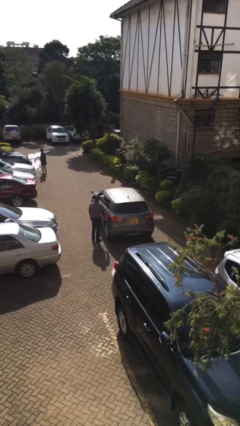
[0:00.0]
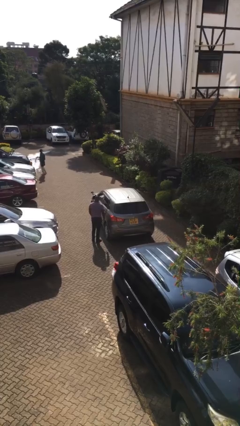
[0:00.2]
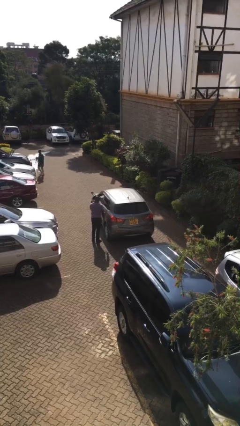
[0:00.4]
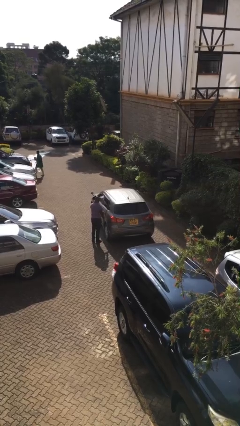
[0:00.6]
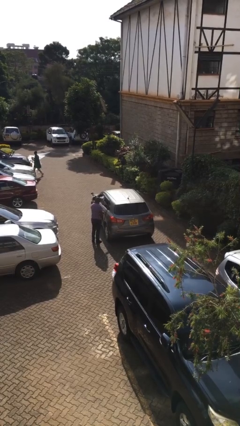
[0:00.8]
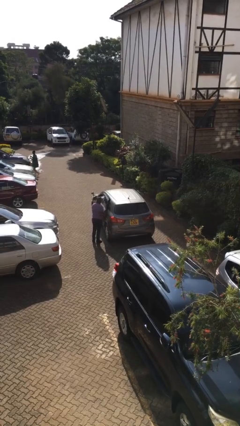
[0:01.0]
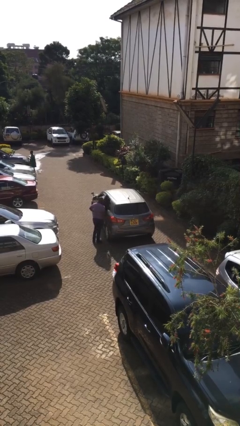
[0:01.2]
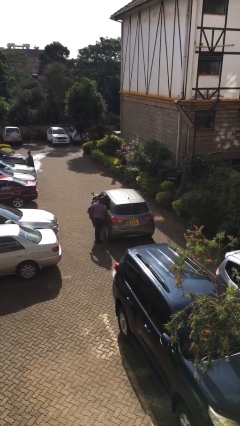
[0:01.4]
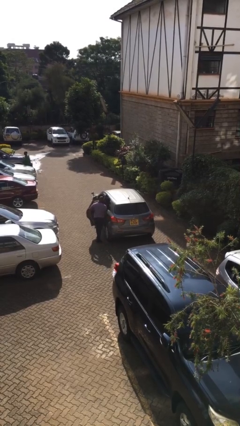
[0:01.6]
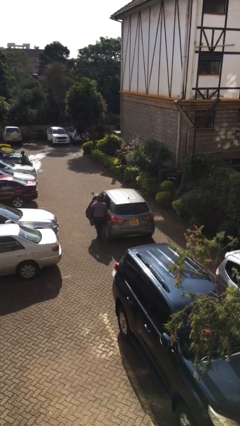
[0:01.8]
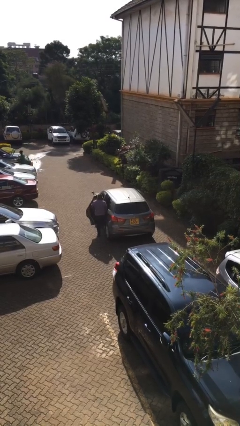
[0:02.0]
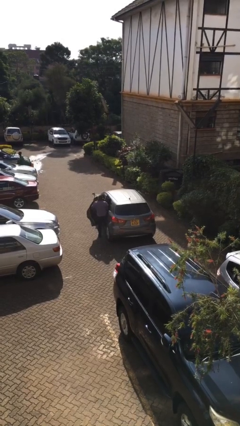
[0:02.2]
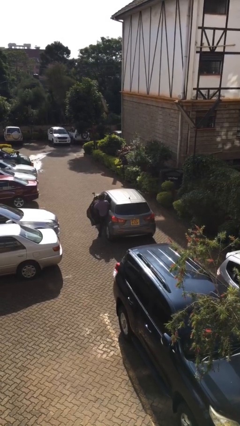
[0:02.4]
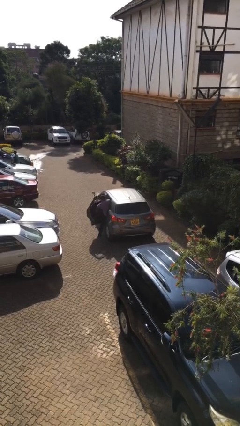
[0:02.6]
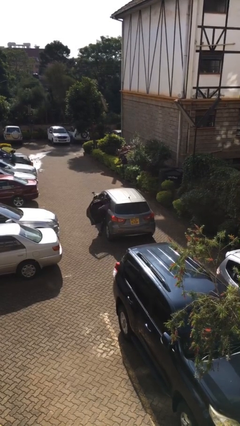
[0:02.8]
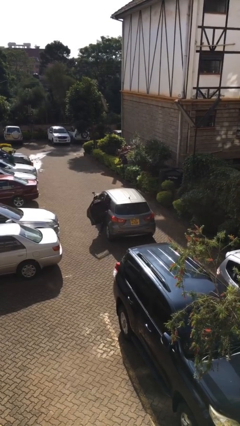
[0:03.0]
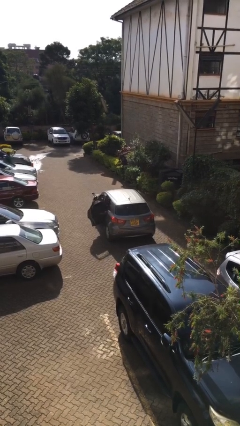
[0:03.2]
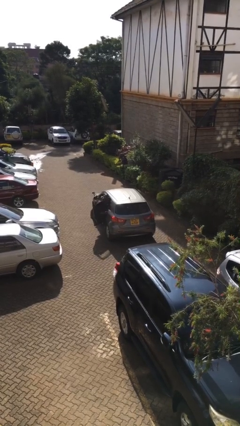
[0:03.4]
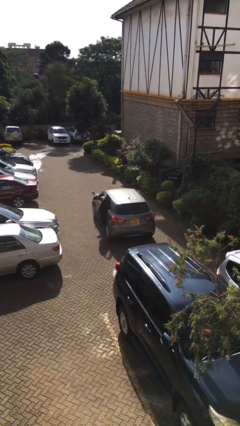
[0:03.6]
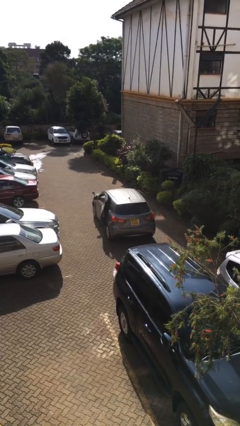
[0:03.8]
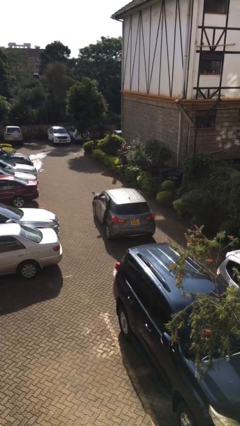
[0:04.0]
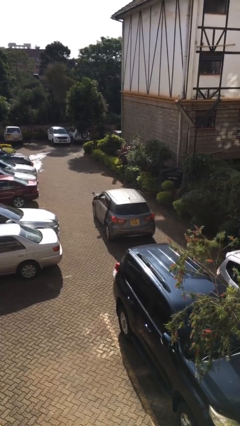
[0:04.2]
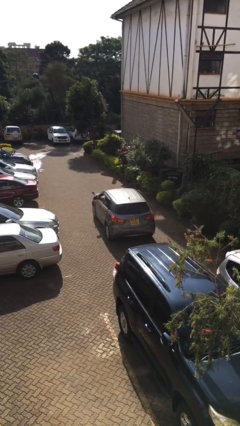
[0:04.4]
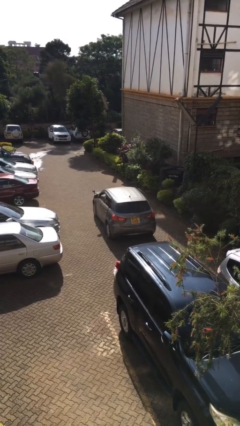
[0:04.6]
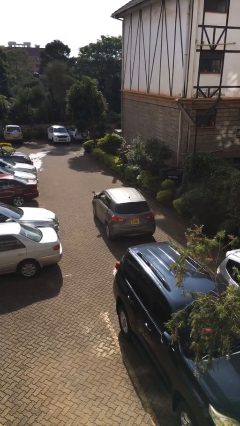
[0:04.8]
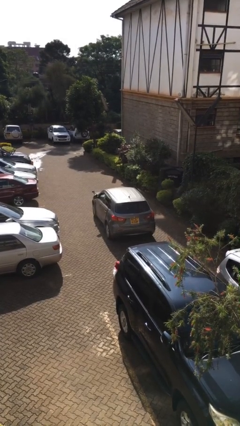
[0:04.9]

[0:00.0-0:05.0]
car picks up person

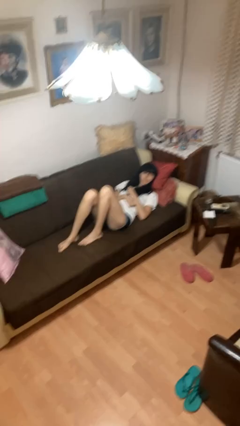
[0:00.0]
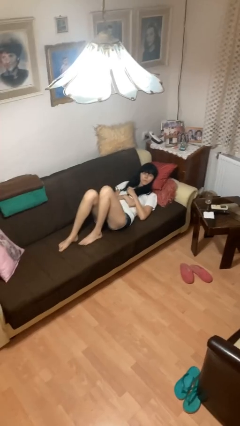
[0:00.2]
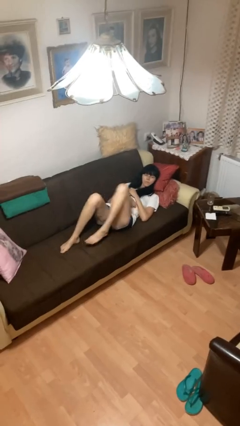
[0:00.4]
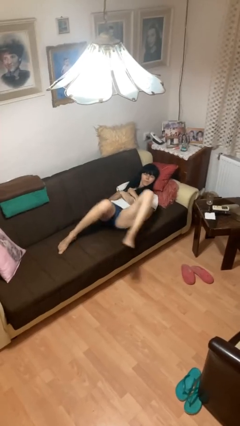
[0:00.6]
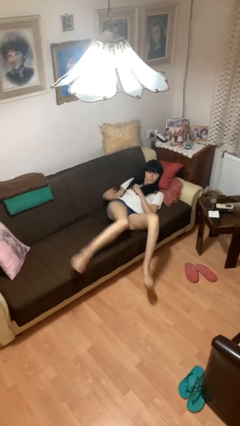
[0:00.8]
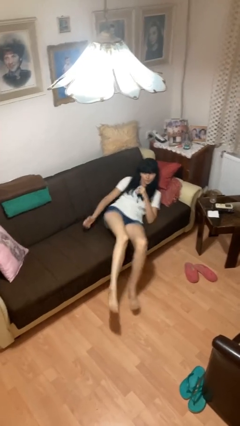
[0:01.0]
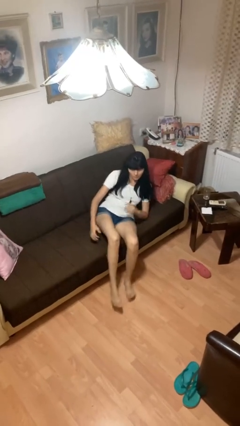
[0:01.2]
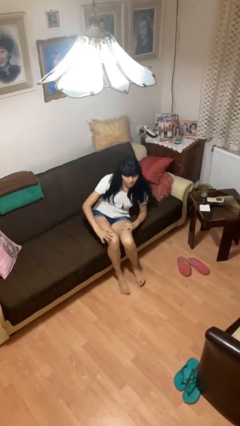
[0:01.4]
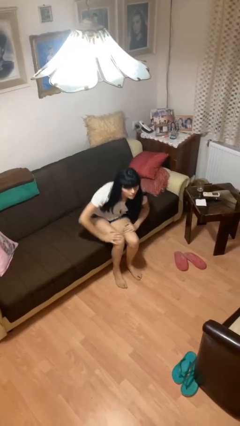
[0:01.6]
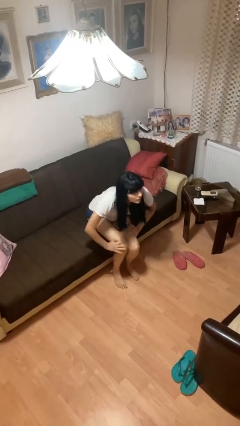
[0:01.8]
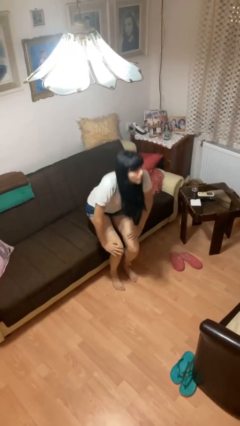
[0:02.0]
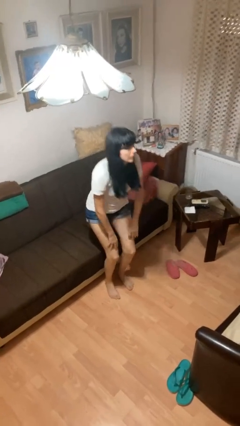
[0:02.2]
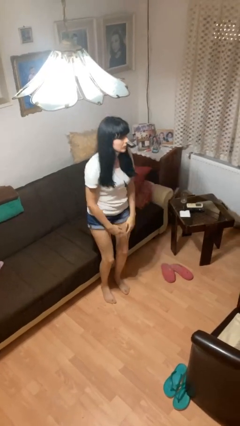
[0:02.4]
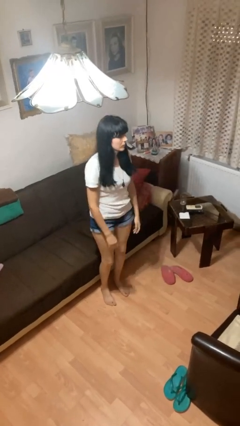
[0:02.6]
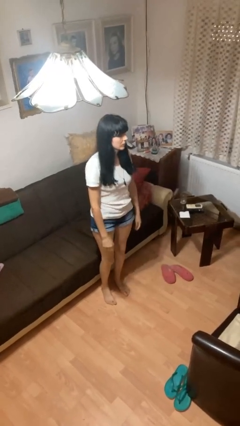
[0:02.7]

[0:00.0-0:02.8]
person stands up

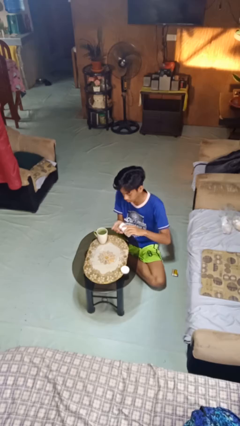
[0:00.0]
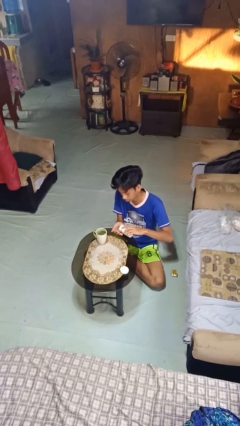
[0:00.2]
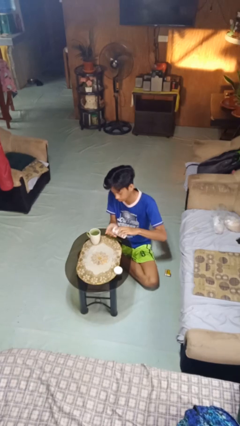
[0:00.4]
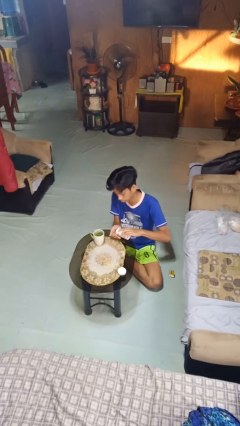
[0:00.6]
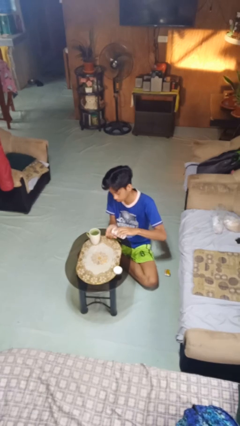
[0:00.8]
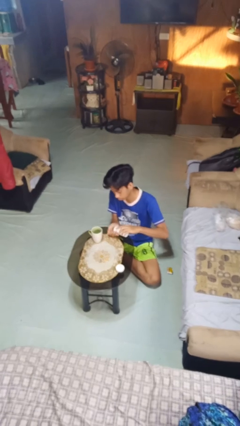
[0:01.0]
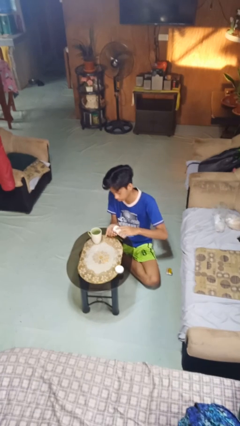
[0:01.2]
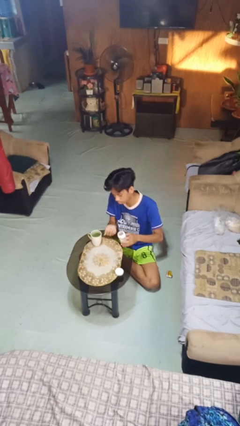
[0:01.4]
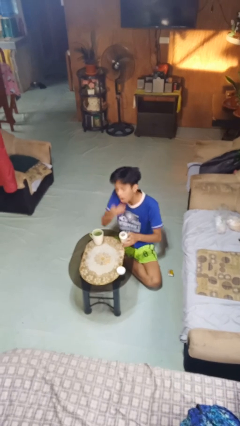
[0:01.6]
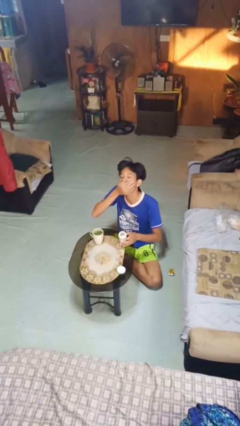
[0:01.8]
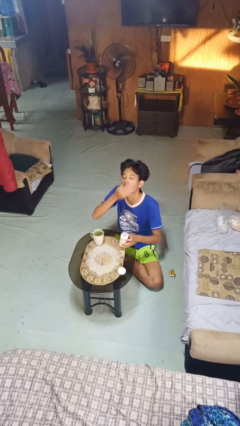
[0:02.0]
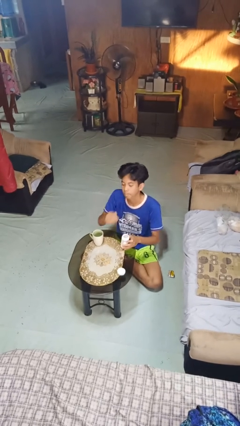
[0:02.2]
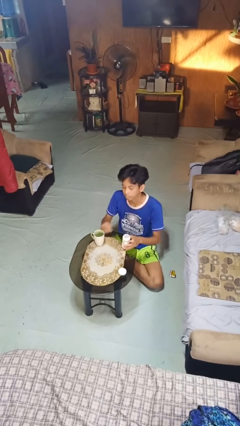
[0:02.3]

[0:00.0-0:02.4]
person takes medicine pills

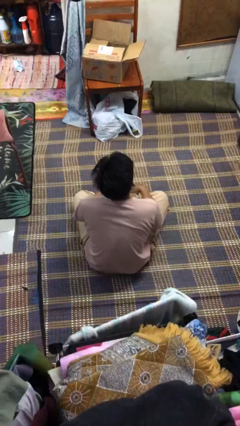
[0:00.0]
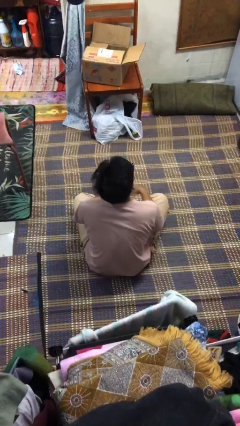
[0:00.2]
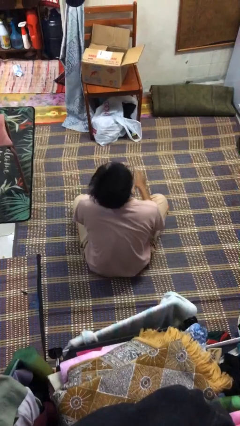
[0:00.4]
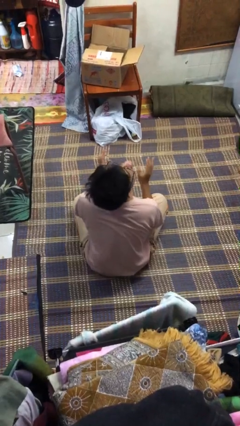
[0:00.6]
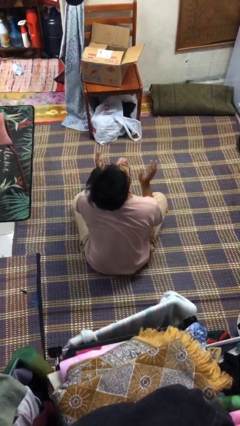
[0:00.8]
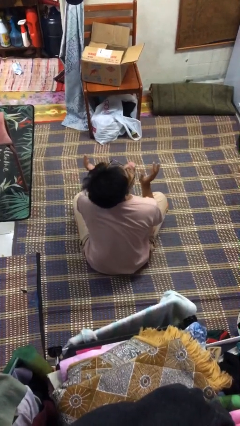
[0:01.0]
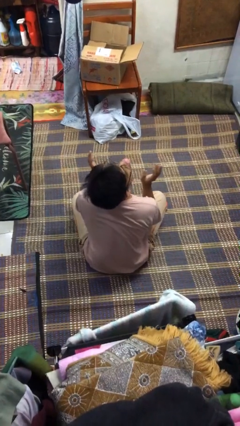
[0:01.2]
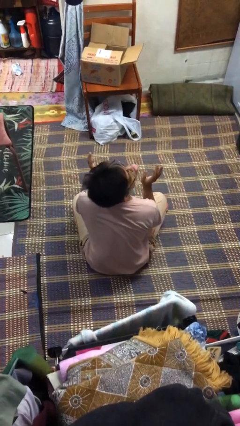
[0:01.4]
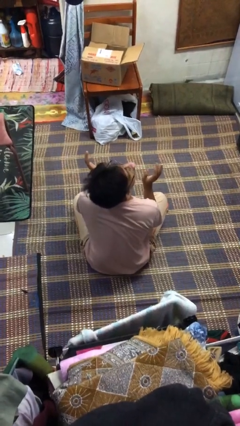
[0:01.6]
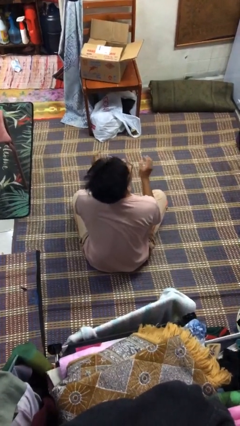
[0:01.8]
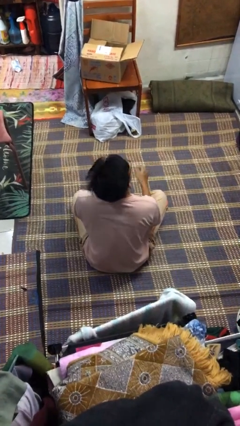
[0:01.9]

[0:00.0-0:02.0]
person sticks out tongue

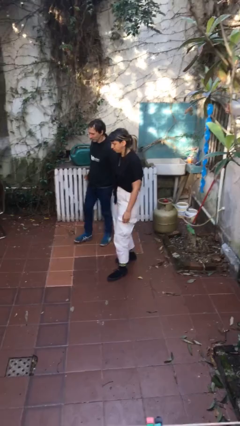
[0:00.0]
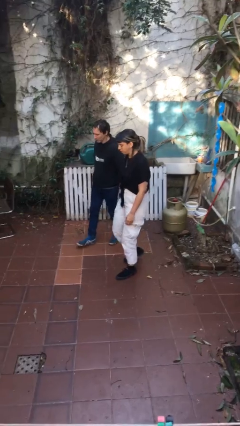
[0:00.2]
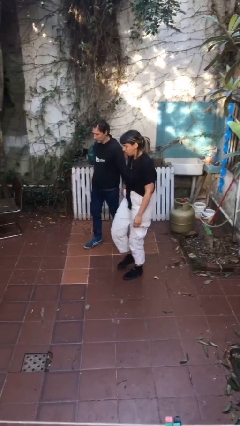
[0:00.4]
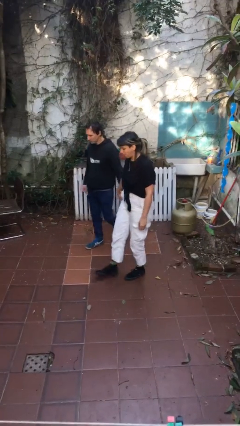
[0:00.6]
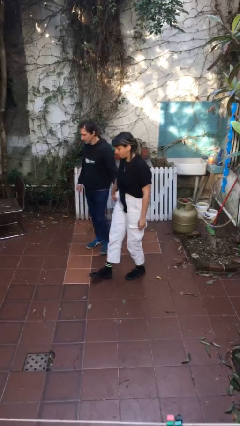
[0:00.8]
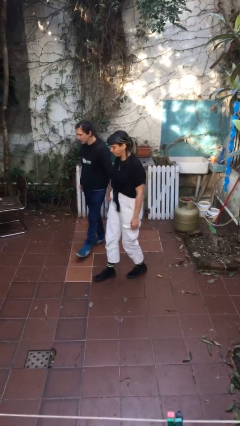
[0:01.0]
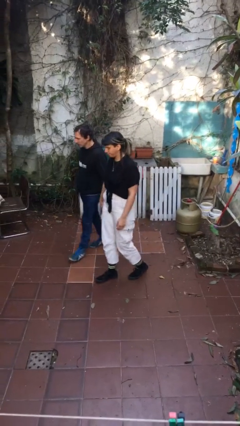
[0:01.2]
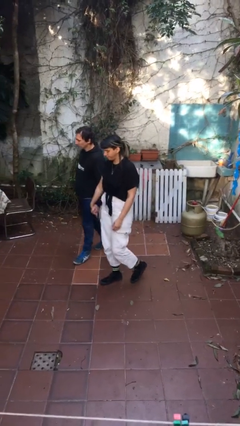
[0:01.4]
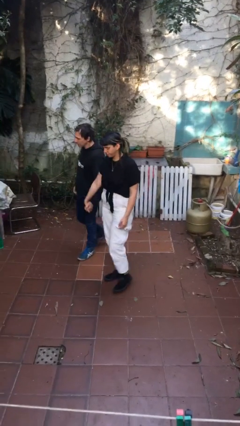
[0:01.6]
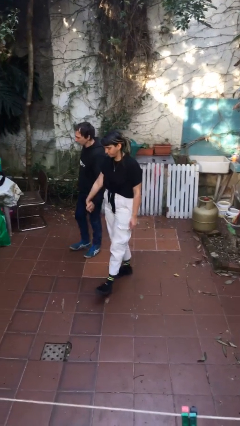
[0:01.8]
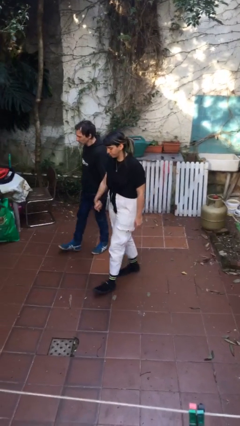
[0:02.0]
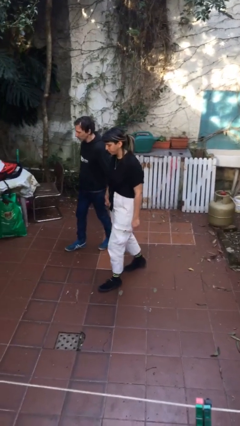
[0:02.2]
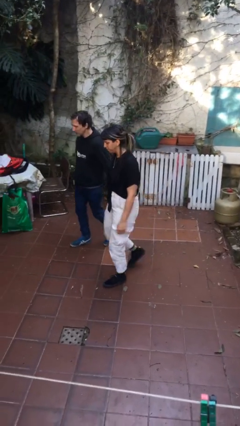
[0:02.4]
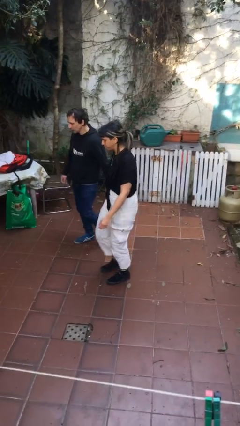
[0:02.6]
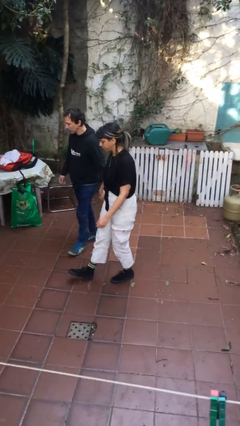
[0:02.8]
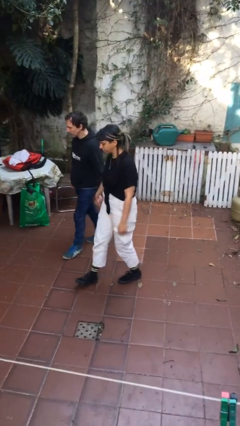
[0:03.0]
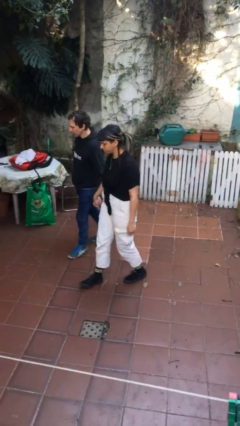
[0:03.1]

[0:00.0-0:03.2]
person holds hand

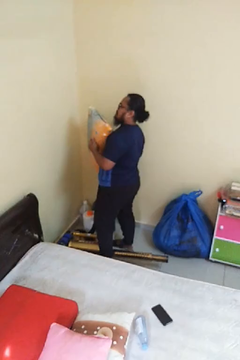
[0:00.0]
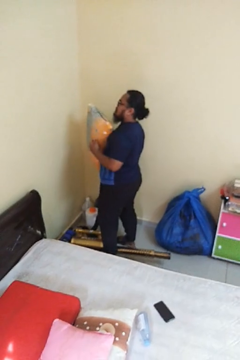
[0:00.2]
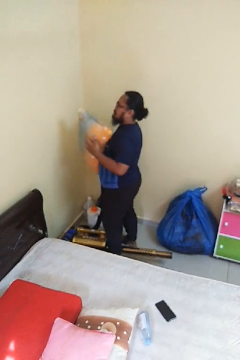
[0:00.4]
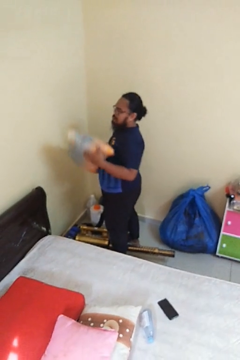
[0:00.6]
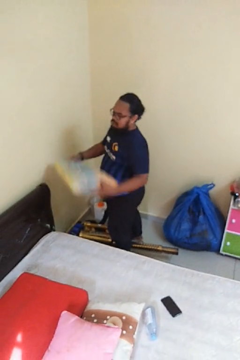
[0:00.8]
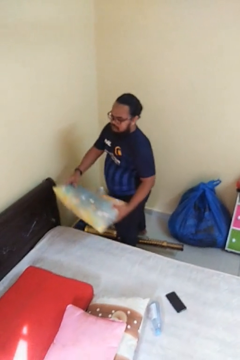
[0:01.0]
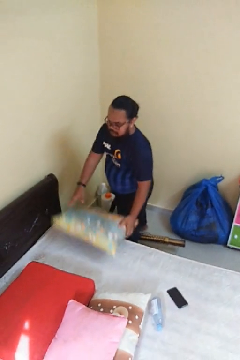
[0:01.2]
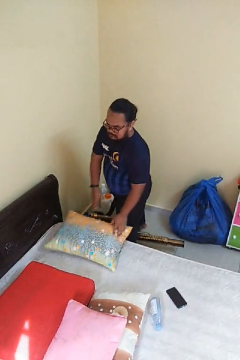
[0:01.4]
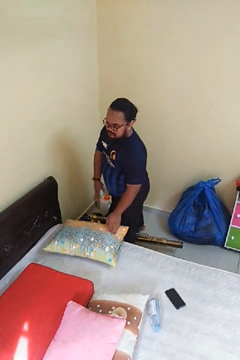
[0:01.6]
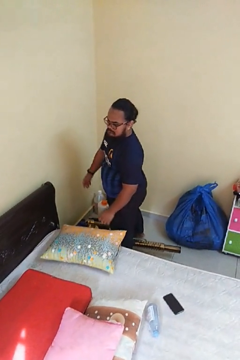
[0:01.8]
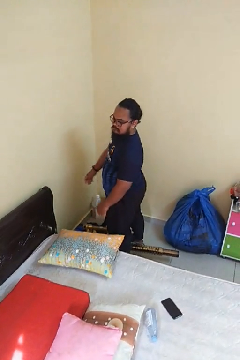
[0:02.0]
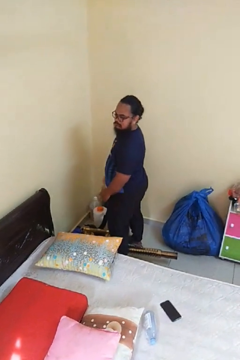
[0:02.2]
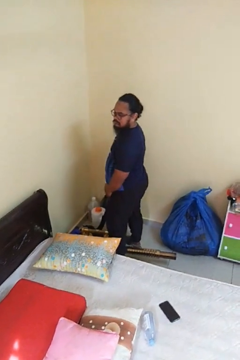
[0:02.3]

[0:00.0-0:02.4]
person puts down object on bed
